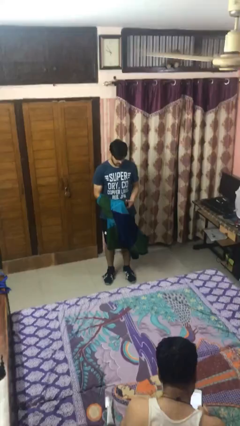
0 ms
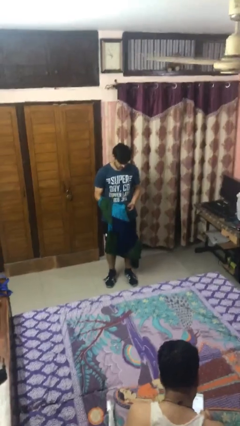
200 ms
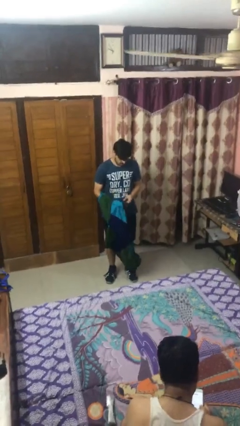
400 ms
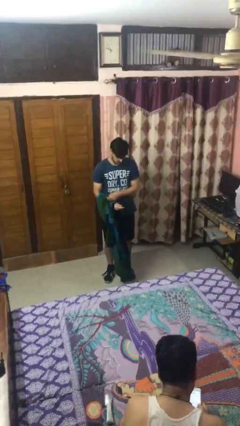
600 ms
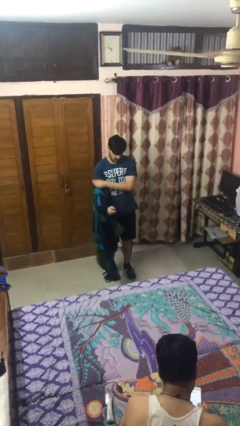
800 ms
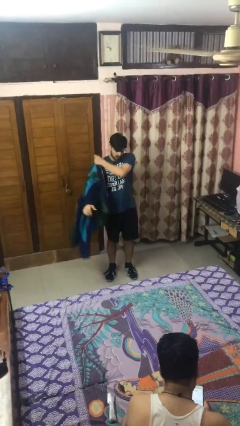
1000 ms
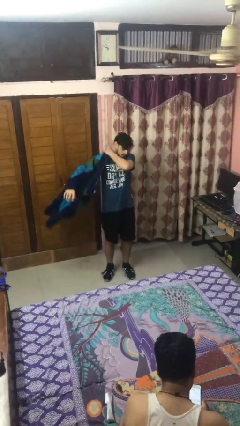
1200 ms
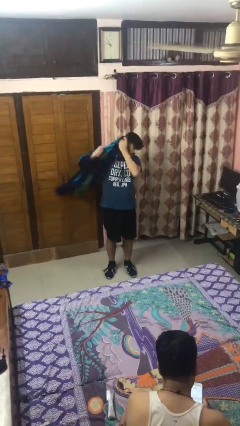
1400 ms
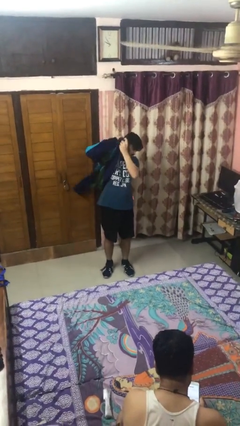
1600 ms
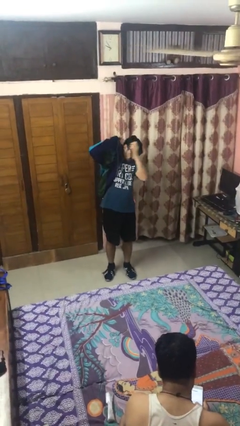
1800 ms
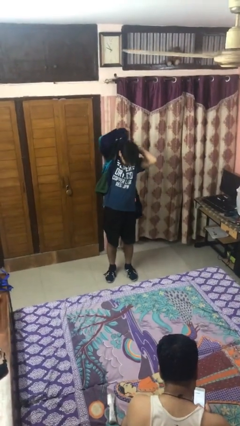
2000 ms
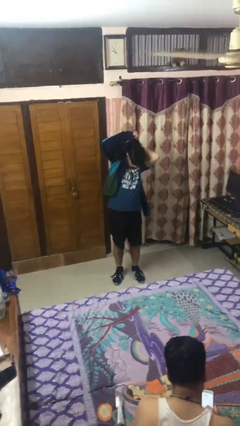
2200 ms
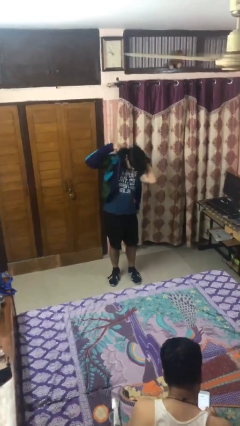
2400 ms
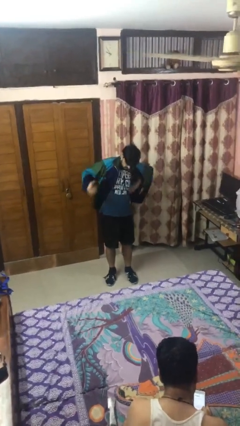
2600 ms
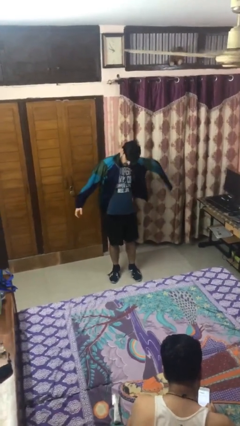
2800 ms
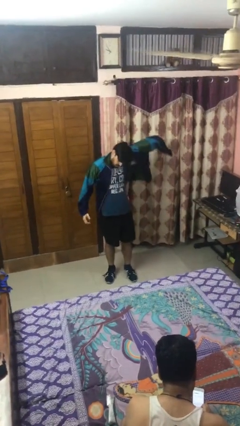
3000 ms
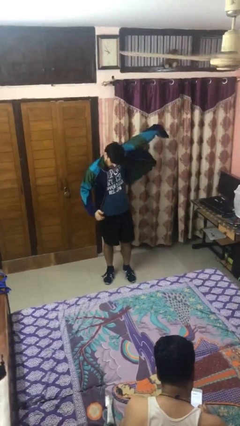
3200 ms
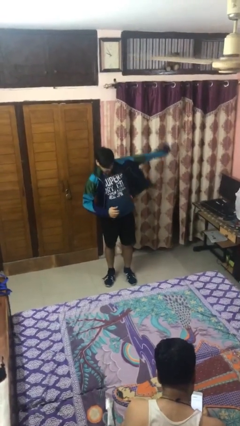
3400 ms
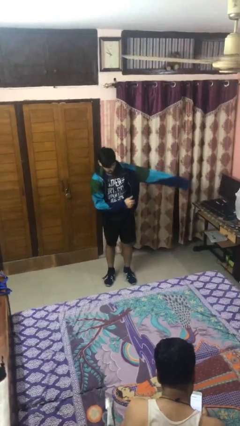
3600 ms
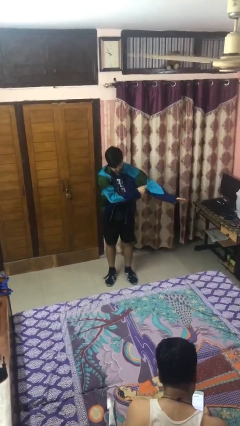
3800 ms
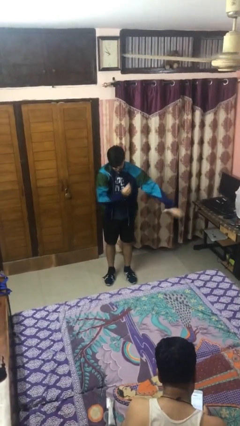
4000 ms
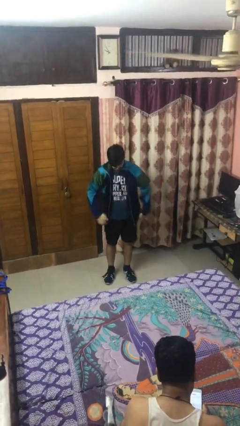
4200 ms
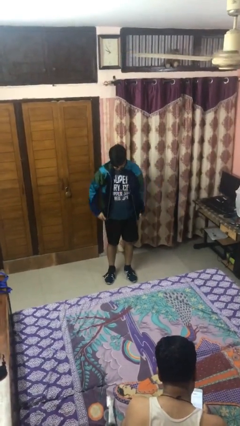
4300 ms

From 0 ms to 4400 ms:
person puts on jacket

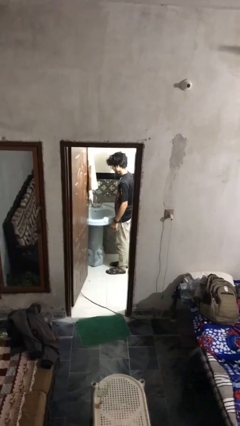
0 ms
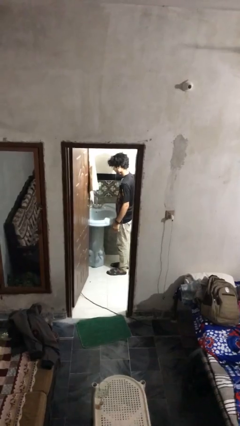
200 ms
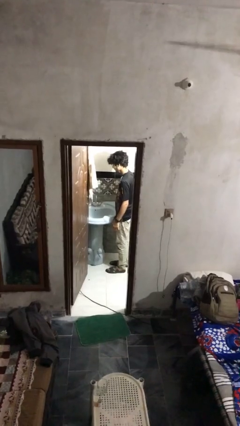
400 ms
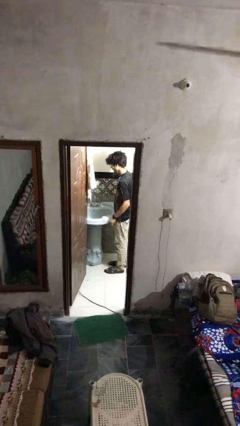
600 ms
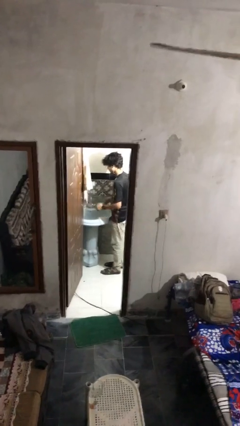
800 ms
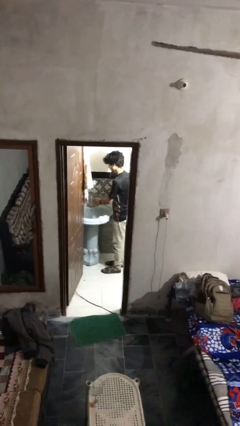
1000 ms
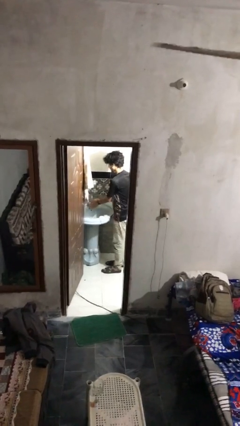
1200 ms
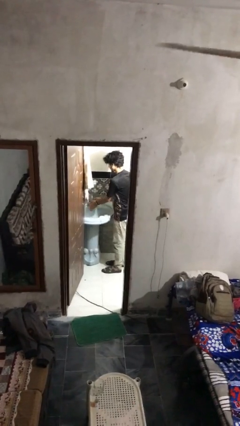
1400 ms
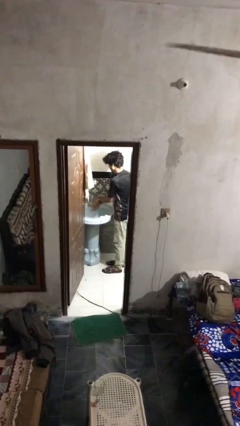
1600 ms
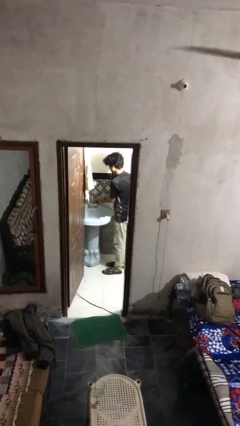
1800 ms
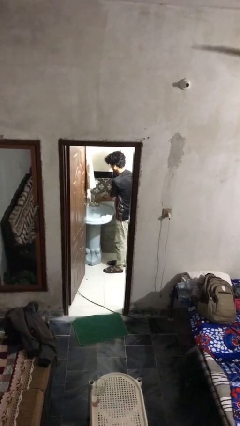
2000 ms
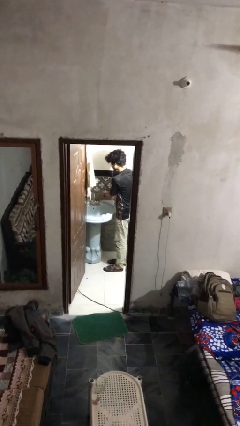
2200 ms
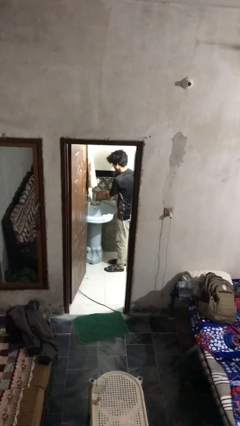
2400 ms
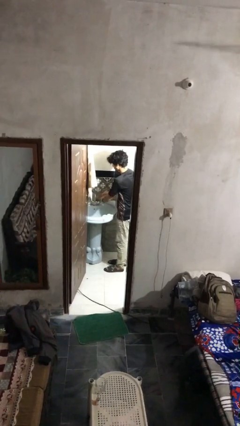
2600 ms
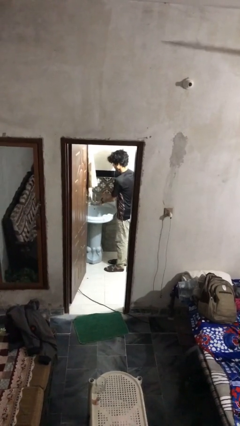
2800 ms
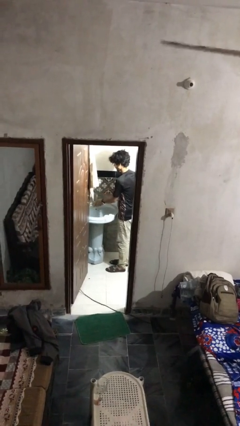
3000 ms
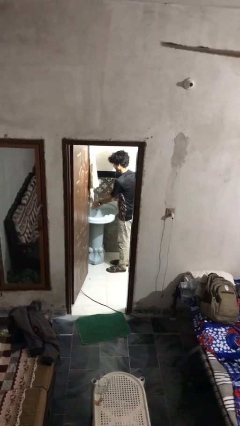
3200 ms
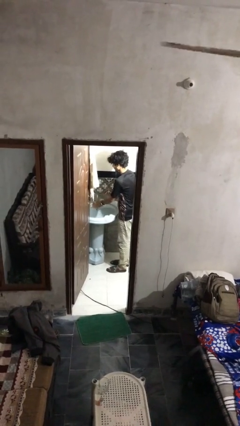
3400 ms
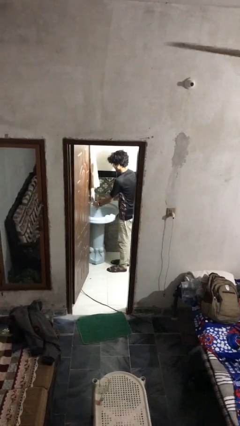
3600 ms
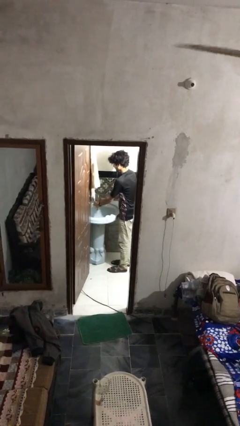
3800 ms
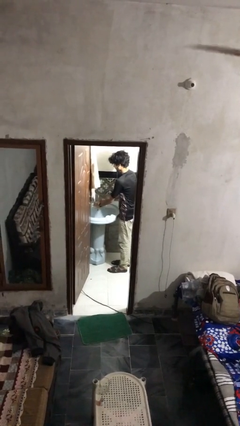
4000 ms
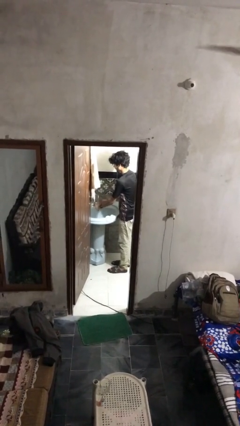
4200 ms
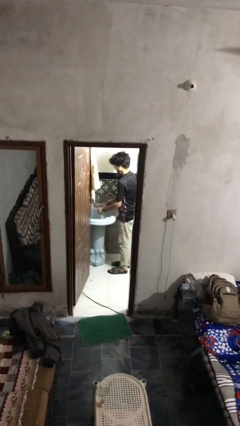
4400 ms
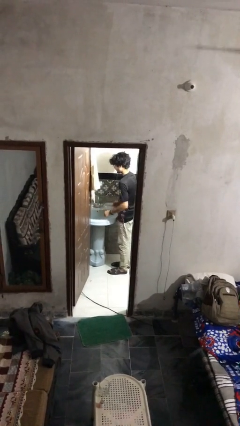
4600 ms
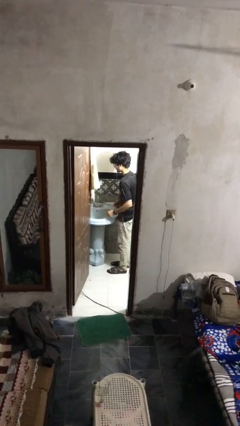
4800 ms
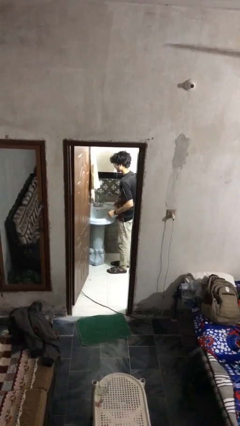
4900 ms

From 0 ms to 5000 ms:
person washes hands

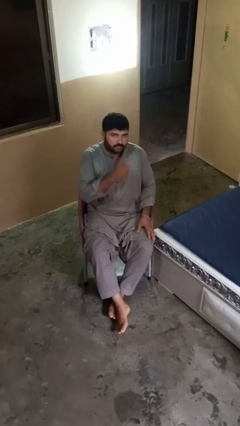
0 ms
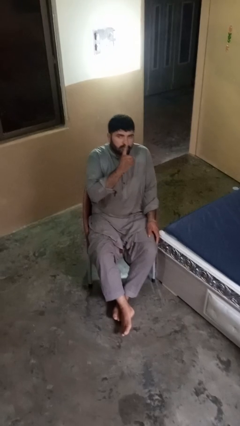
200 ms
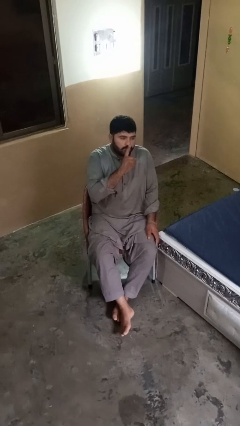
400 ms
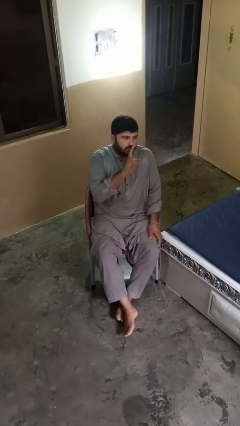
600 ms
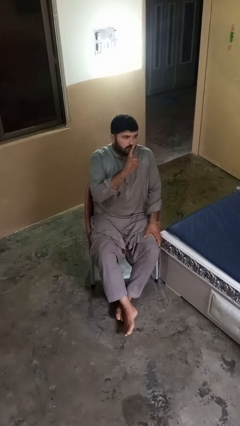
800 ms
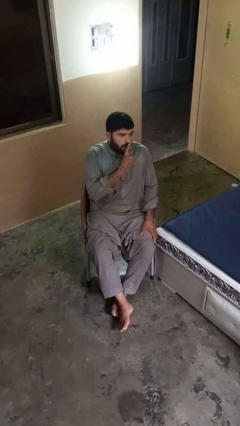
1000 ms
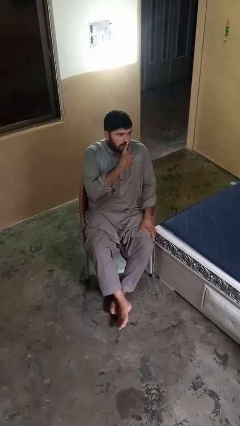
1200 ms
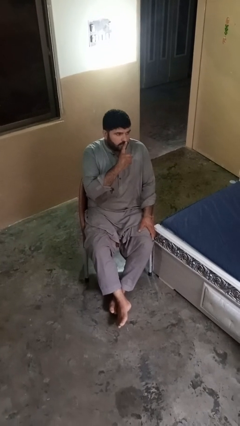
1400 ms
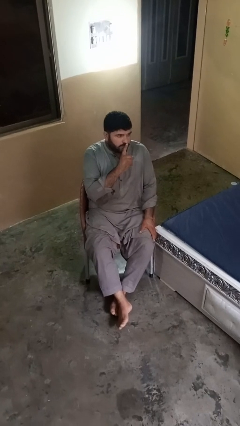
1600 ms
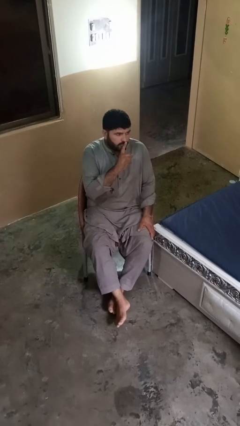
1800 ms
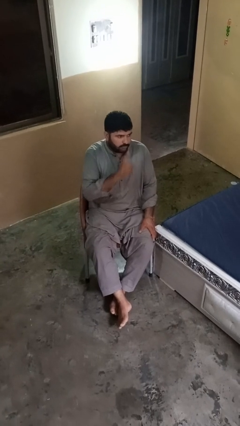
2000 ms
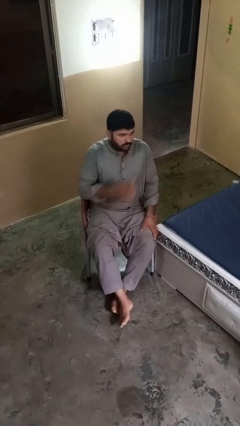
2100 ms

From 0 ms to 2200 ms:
person gestures be quiet

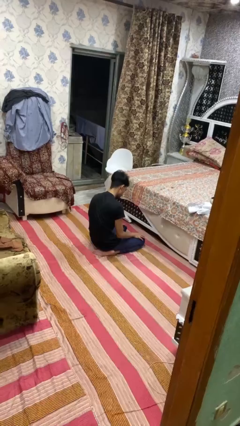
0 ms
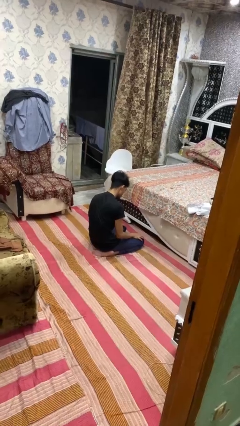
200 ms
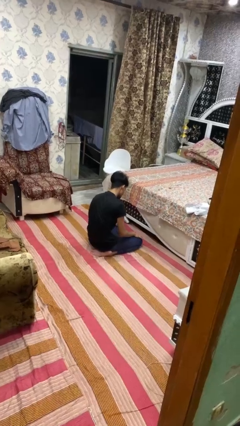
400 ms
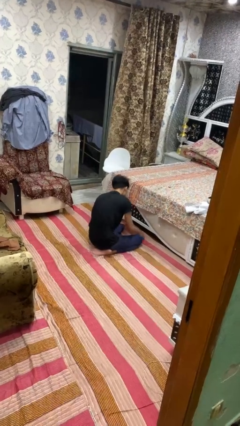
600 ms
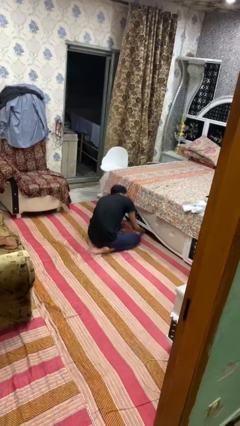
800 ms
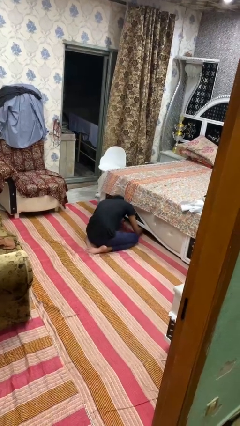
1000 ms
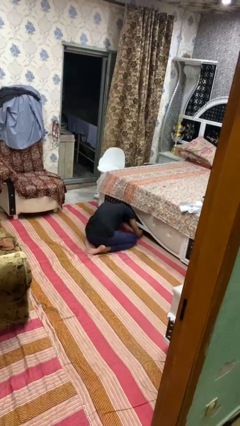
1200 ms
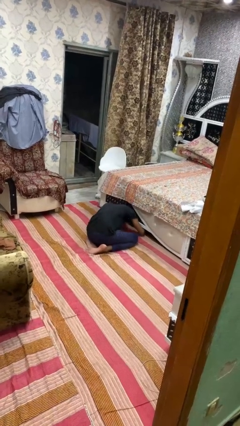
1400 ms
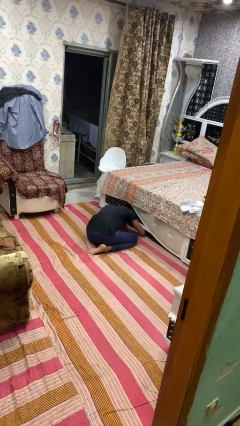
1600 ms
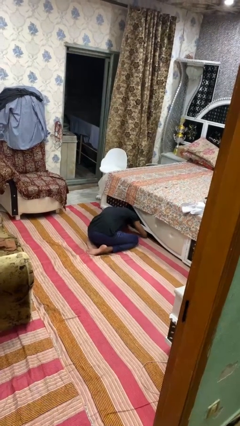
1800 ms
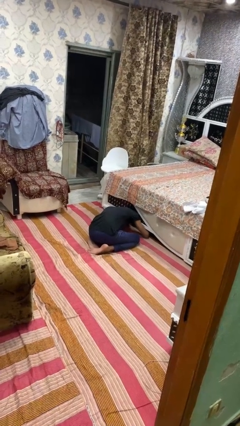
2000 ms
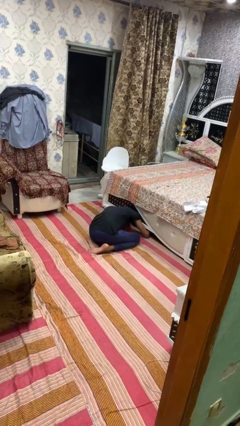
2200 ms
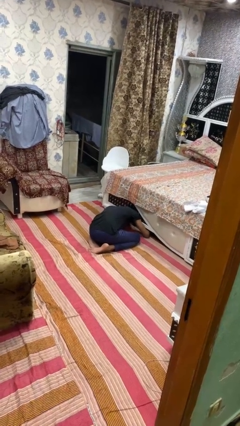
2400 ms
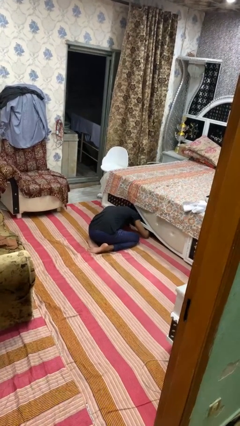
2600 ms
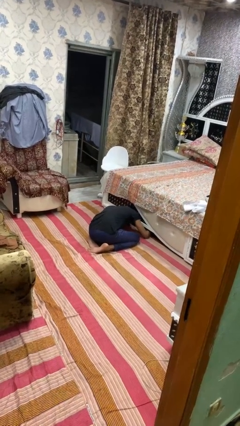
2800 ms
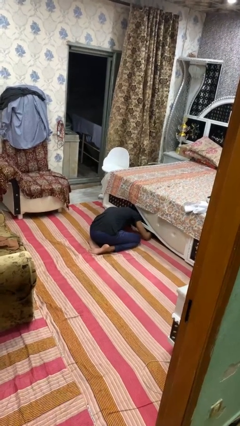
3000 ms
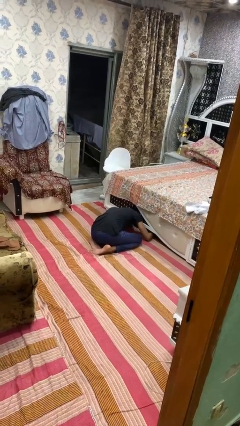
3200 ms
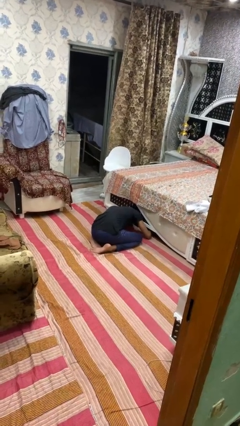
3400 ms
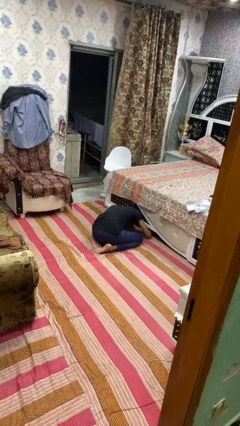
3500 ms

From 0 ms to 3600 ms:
person searches under bed

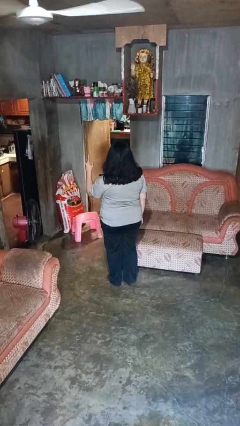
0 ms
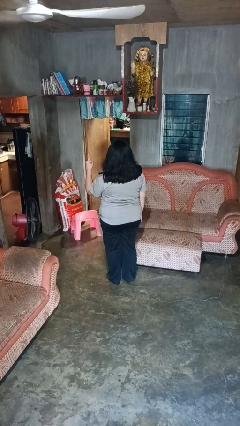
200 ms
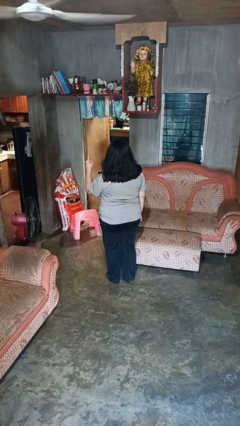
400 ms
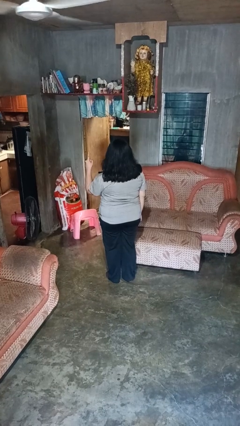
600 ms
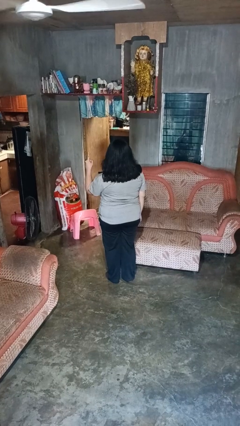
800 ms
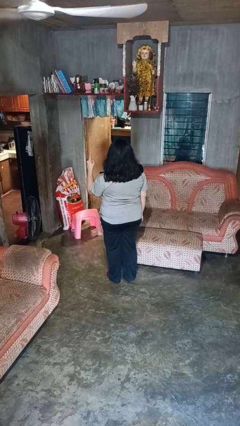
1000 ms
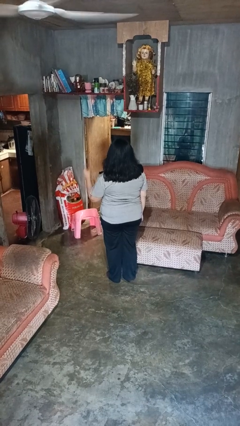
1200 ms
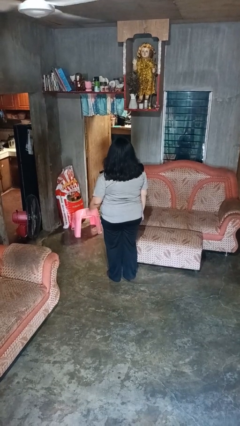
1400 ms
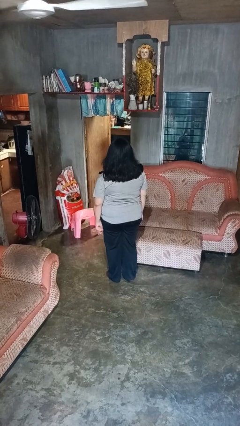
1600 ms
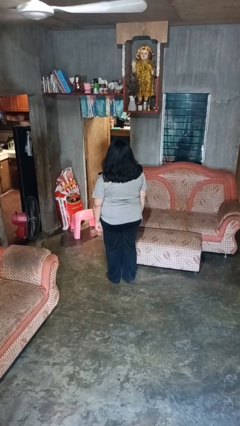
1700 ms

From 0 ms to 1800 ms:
person gestures number one

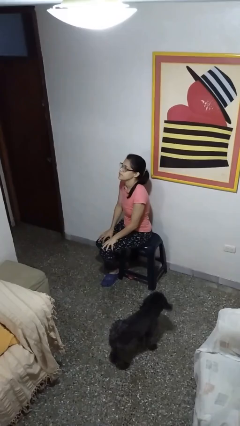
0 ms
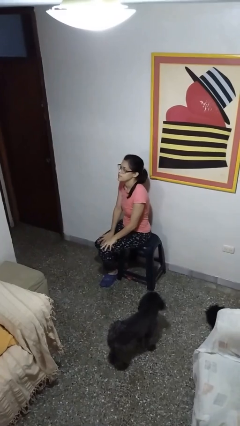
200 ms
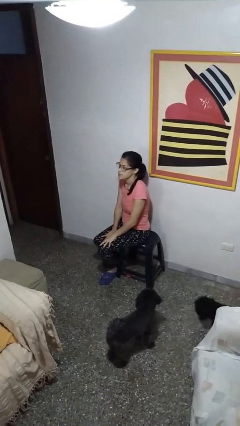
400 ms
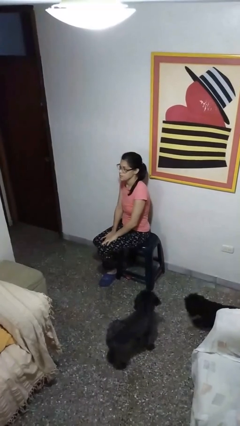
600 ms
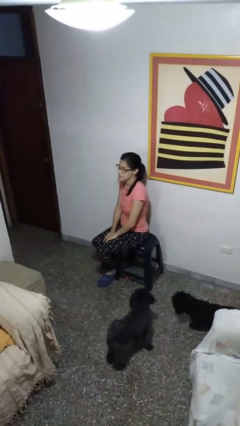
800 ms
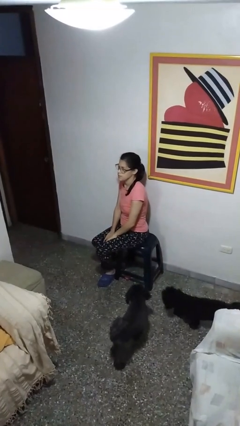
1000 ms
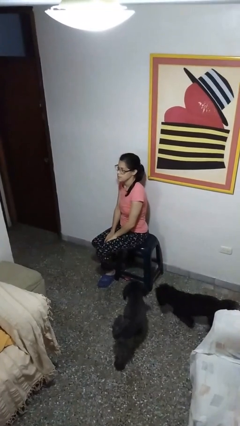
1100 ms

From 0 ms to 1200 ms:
person gestures lower hand
